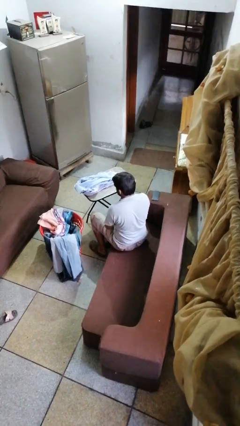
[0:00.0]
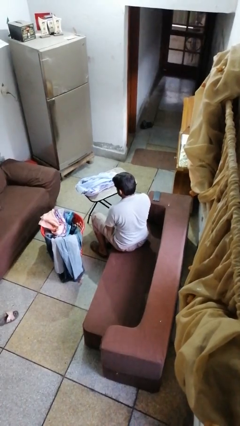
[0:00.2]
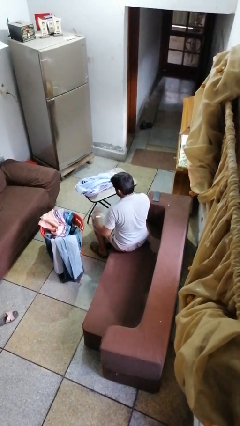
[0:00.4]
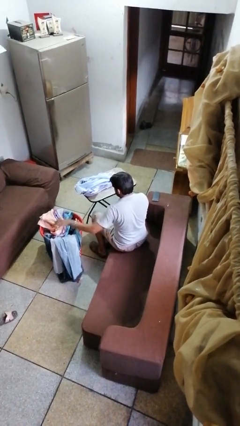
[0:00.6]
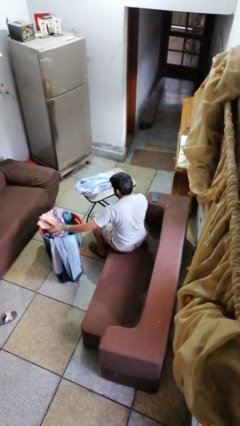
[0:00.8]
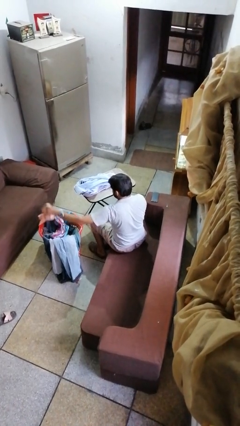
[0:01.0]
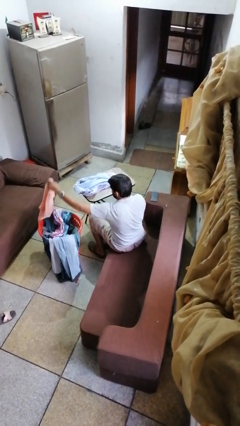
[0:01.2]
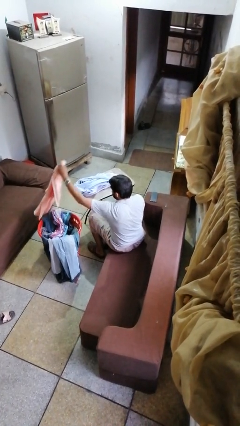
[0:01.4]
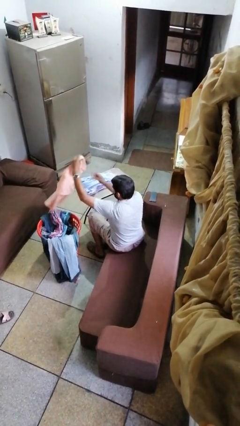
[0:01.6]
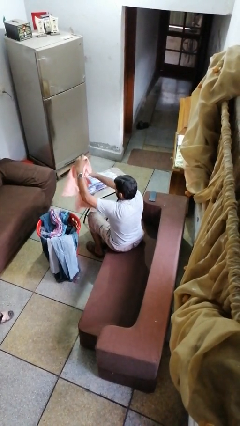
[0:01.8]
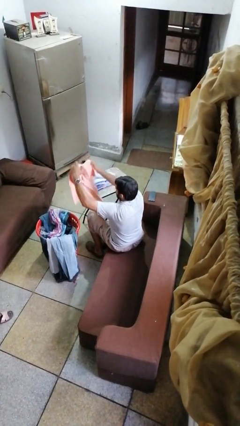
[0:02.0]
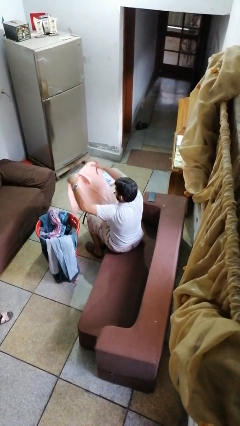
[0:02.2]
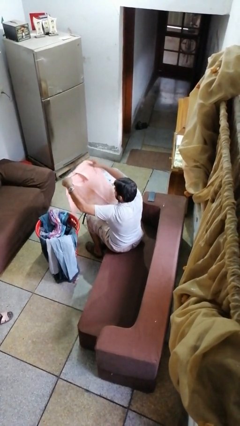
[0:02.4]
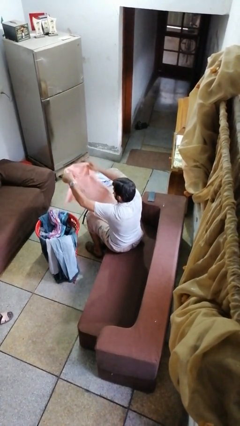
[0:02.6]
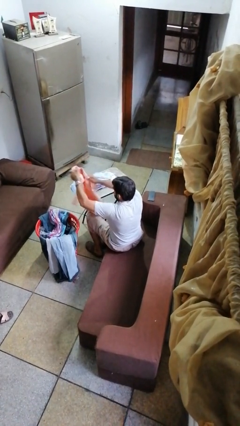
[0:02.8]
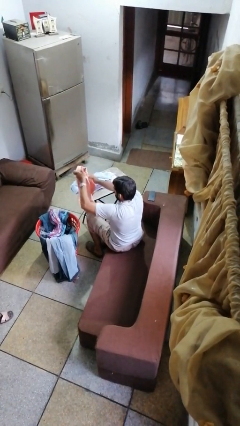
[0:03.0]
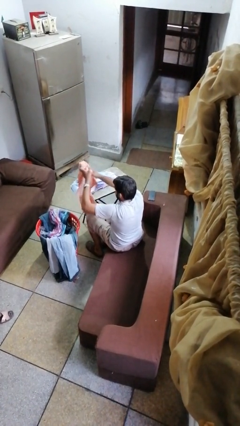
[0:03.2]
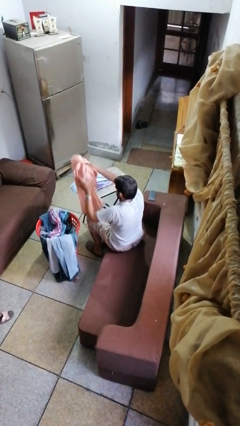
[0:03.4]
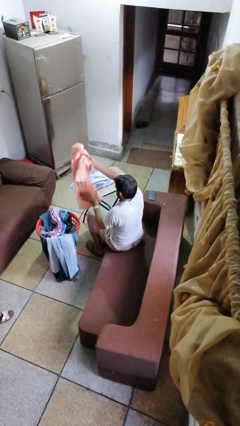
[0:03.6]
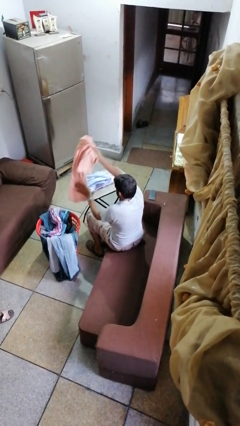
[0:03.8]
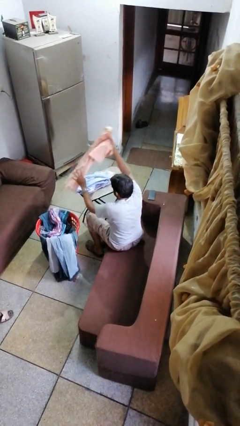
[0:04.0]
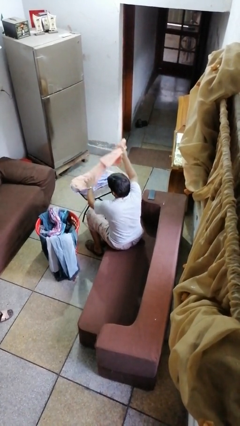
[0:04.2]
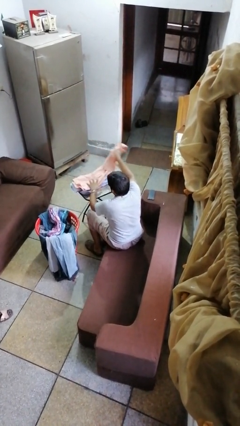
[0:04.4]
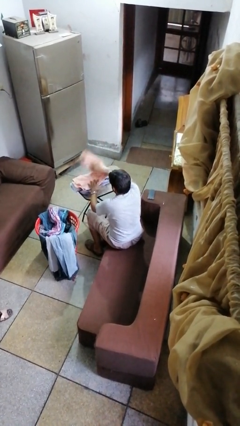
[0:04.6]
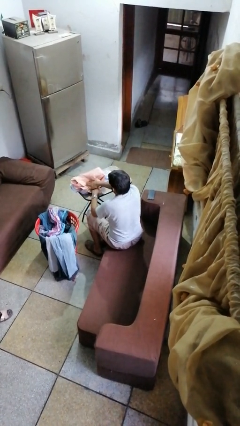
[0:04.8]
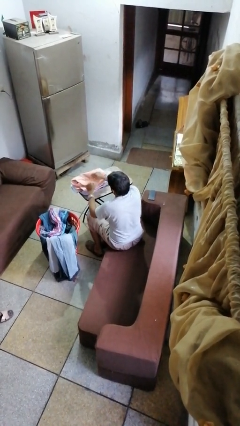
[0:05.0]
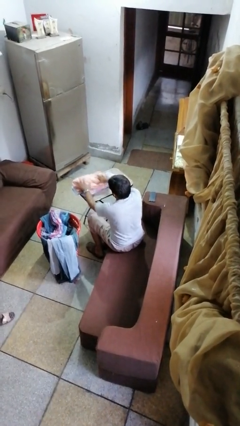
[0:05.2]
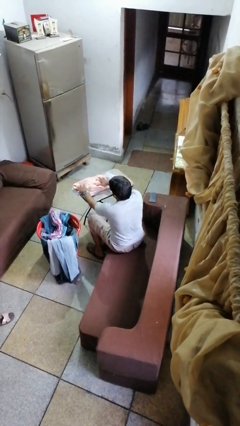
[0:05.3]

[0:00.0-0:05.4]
person folds shirt

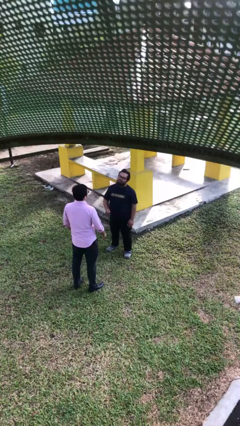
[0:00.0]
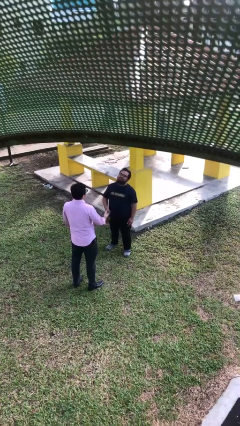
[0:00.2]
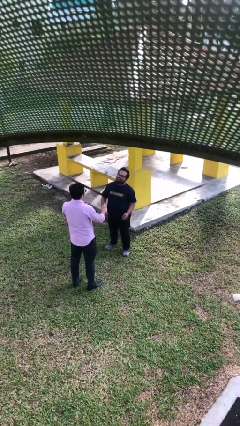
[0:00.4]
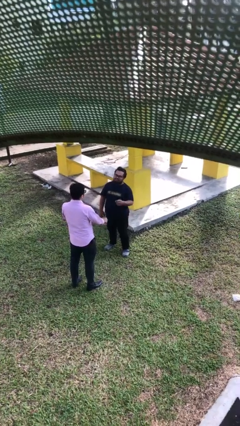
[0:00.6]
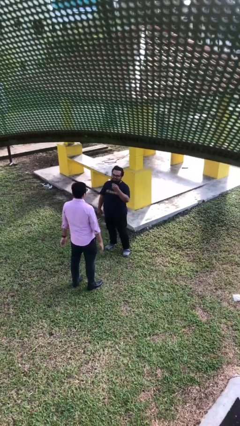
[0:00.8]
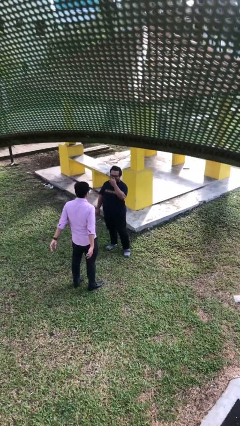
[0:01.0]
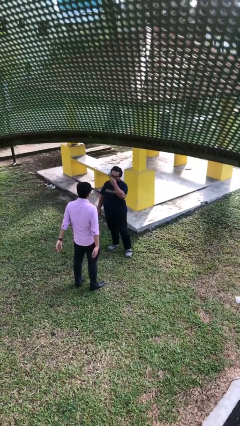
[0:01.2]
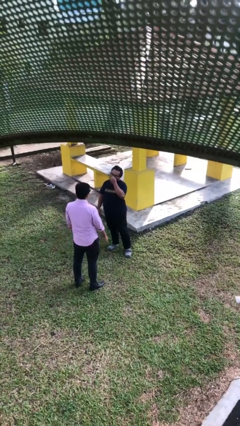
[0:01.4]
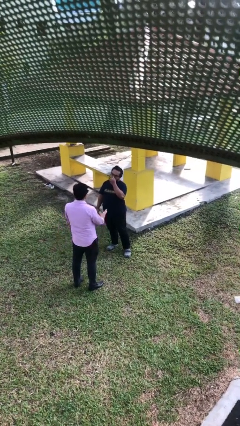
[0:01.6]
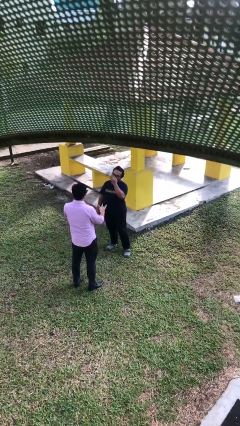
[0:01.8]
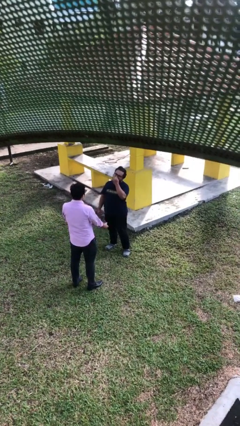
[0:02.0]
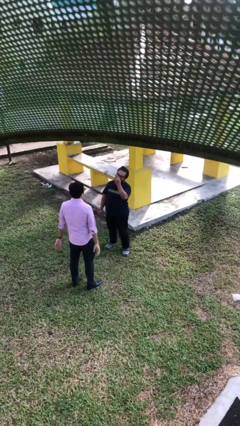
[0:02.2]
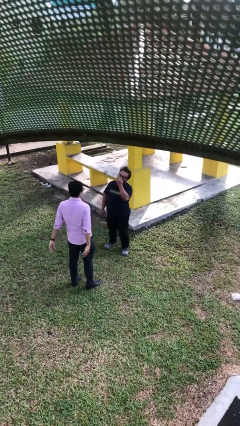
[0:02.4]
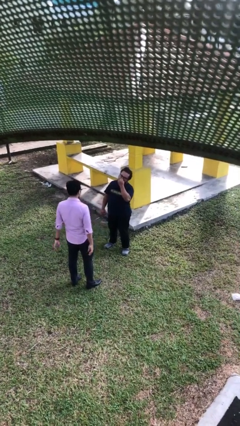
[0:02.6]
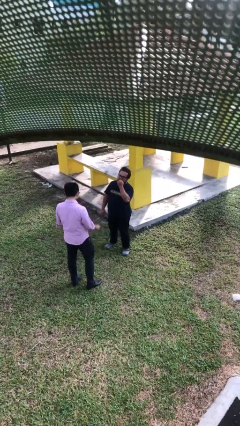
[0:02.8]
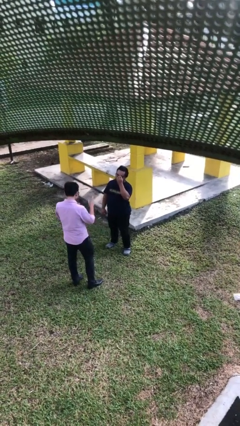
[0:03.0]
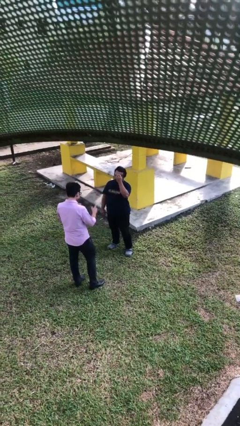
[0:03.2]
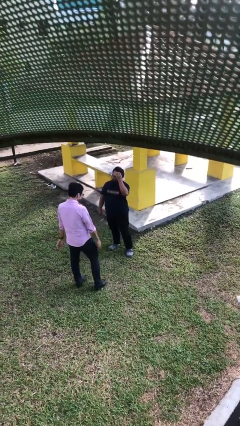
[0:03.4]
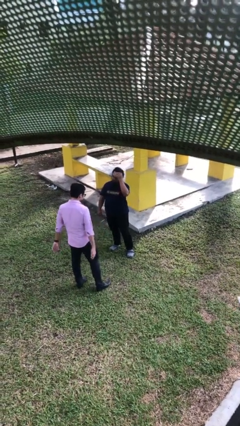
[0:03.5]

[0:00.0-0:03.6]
person talks to person

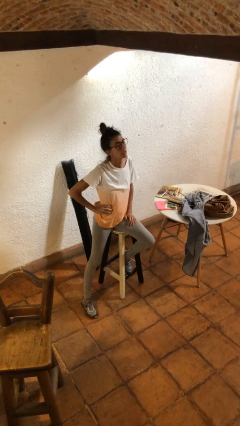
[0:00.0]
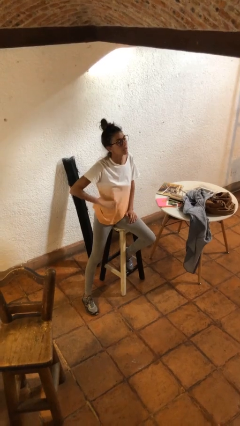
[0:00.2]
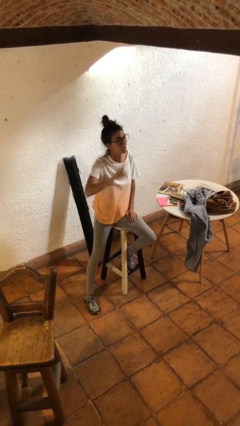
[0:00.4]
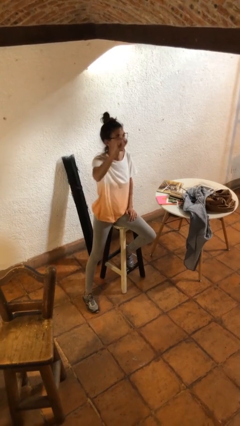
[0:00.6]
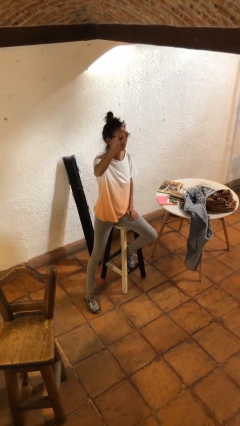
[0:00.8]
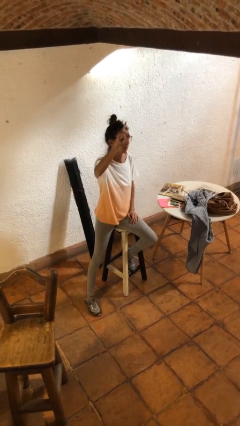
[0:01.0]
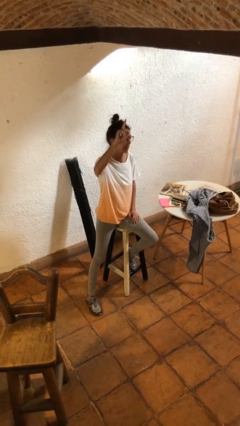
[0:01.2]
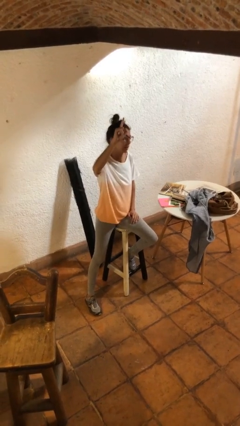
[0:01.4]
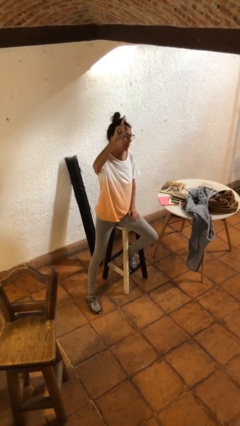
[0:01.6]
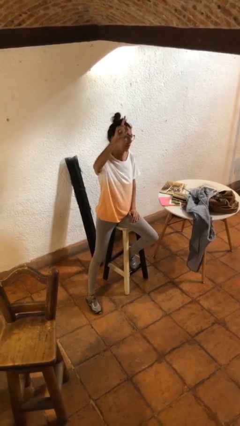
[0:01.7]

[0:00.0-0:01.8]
person gestures raise hand

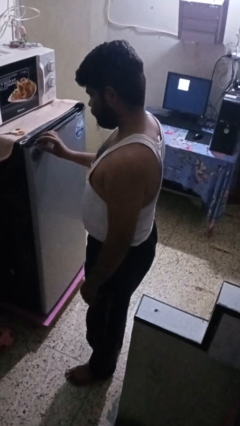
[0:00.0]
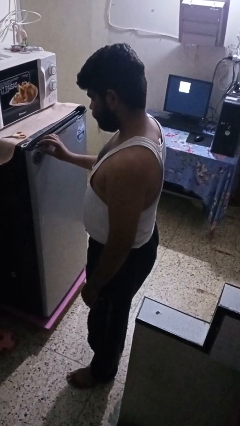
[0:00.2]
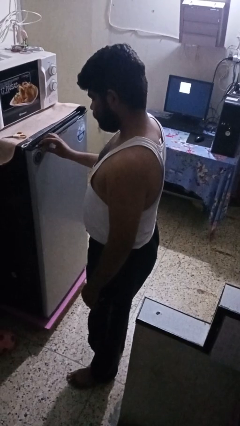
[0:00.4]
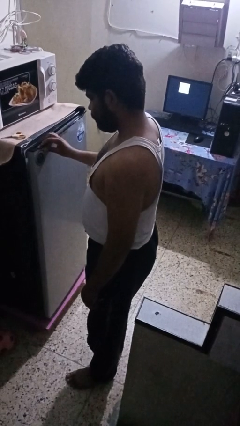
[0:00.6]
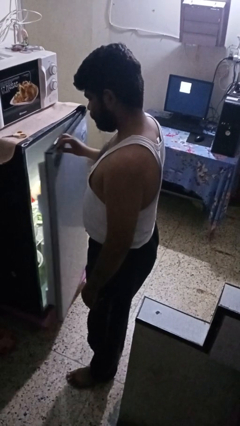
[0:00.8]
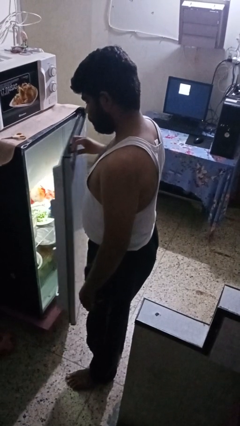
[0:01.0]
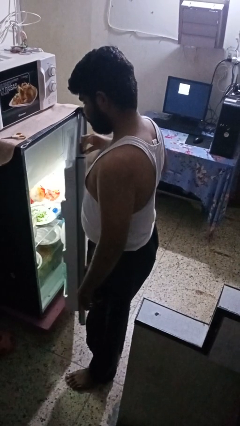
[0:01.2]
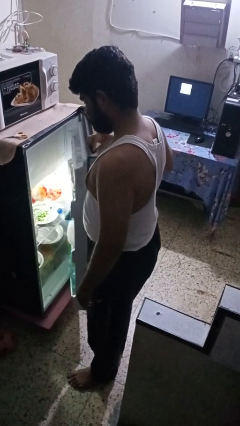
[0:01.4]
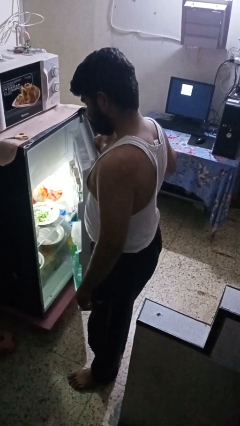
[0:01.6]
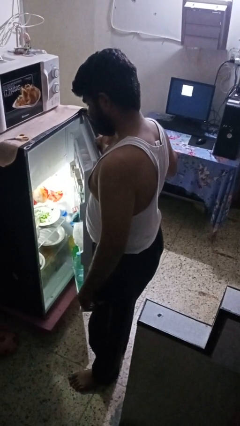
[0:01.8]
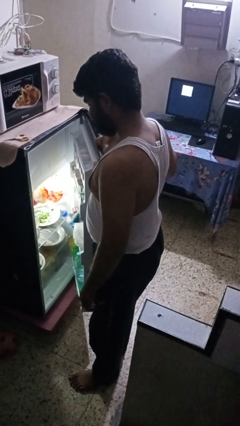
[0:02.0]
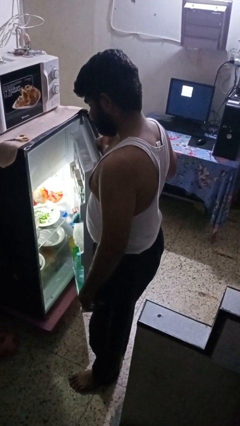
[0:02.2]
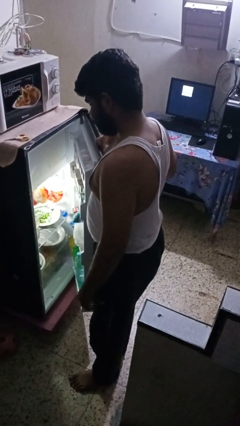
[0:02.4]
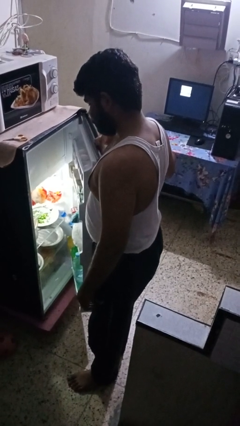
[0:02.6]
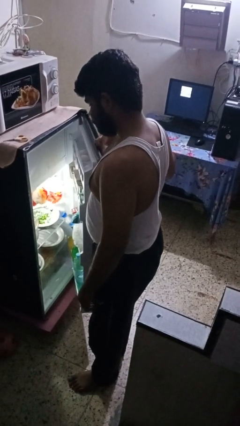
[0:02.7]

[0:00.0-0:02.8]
person opens refrigerator

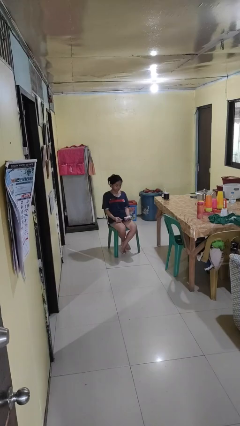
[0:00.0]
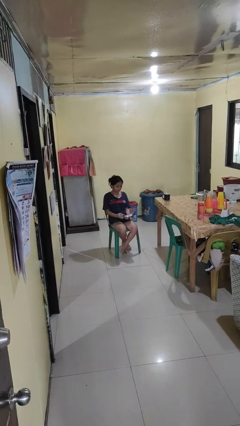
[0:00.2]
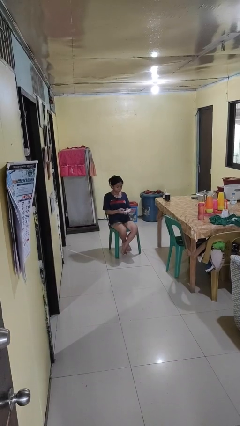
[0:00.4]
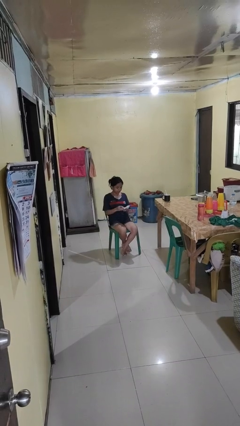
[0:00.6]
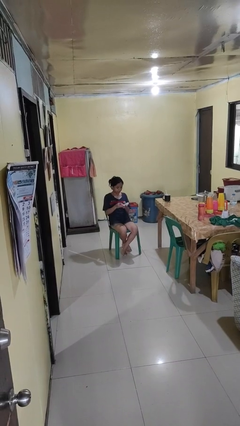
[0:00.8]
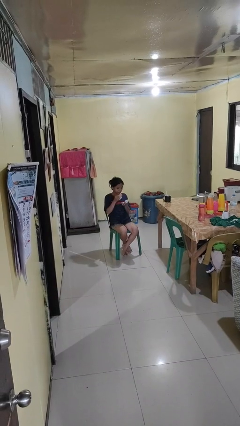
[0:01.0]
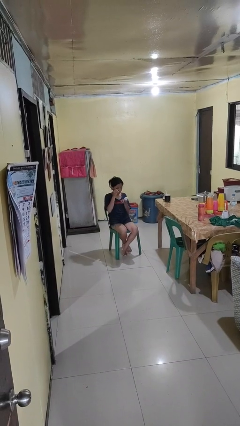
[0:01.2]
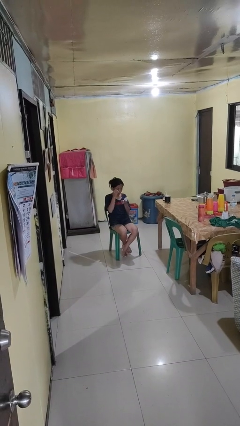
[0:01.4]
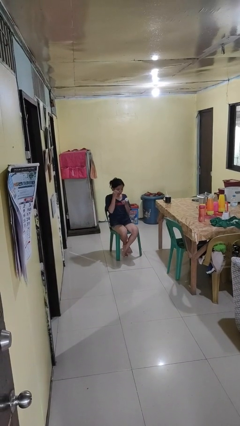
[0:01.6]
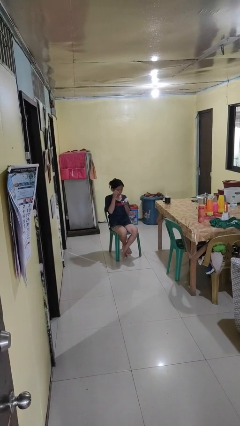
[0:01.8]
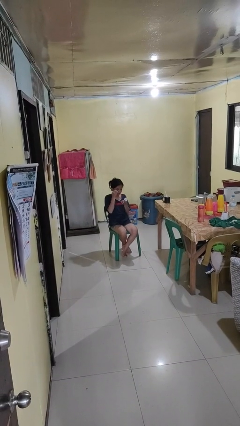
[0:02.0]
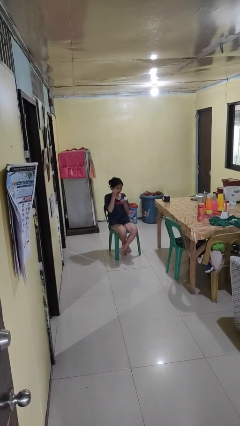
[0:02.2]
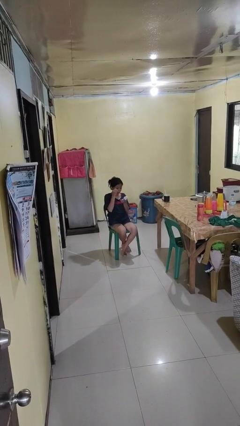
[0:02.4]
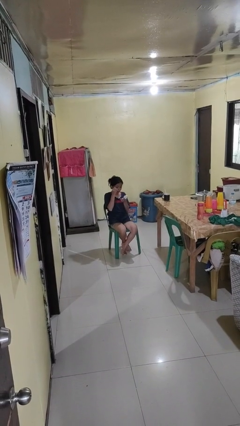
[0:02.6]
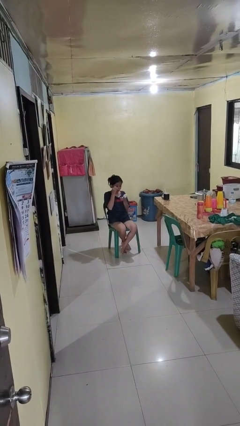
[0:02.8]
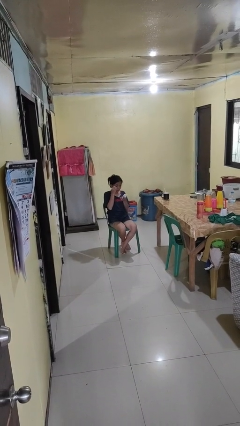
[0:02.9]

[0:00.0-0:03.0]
person applies eye makeup

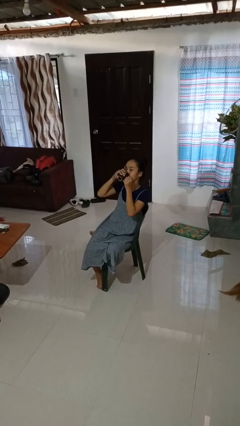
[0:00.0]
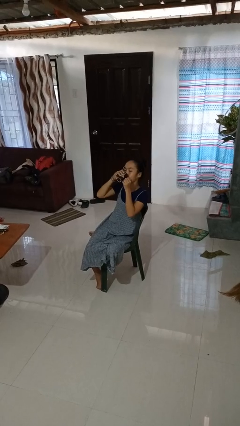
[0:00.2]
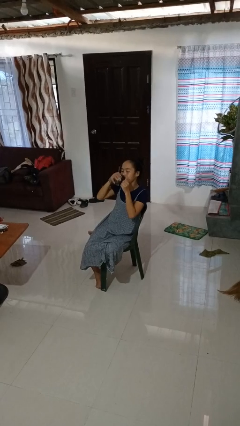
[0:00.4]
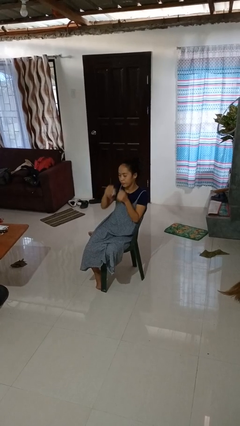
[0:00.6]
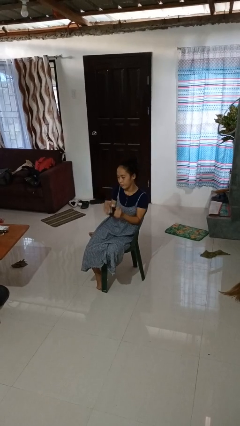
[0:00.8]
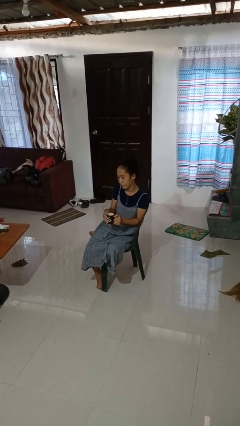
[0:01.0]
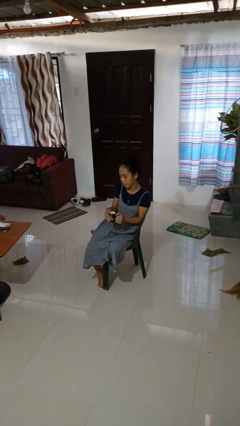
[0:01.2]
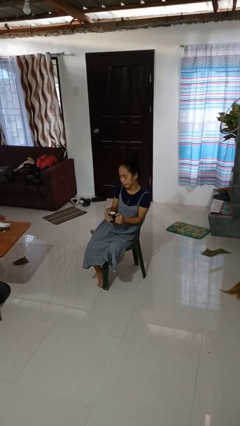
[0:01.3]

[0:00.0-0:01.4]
person drinks from mug
